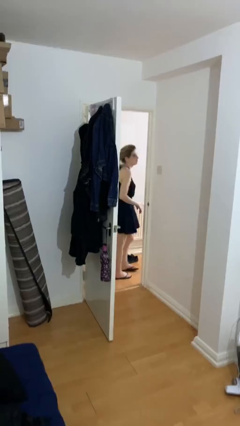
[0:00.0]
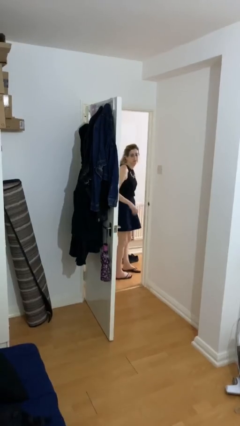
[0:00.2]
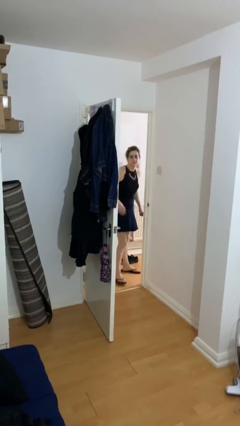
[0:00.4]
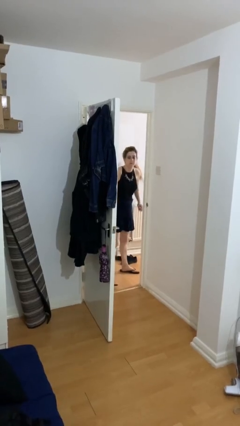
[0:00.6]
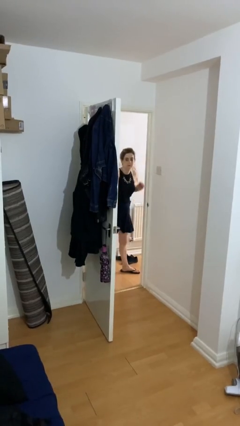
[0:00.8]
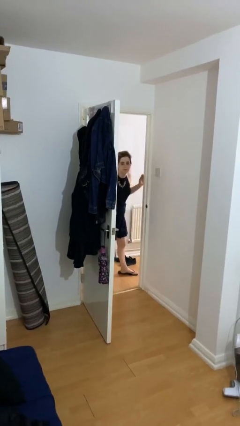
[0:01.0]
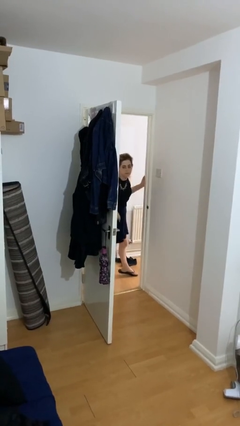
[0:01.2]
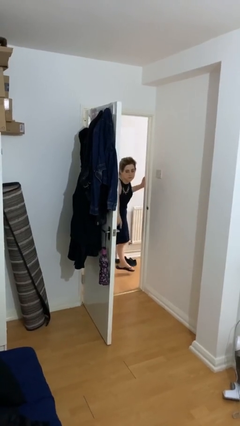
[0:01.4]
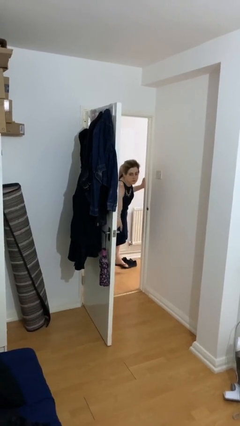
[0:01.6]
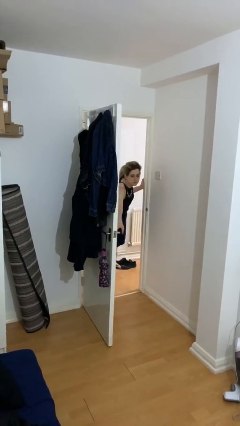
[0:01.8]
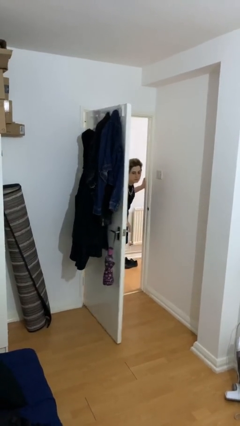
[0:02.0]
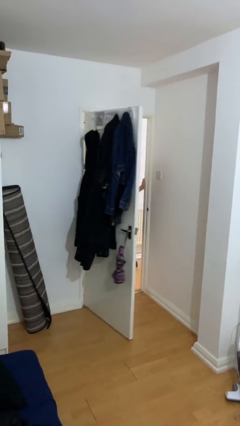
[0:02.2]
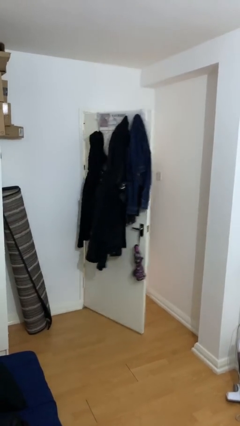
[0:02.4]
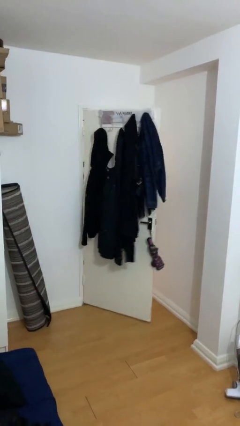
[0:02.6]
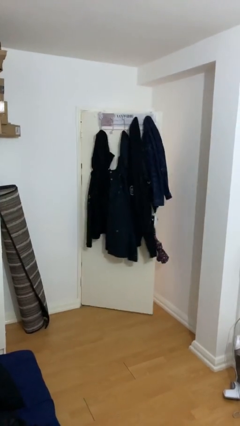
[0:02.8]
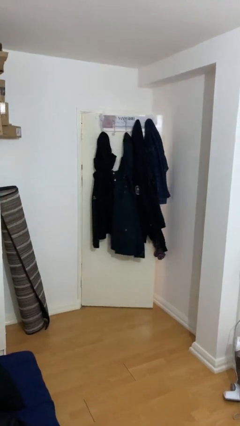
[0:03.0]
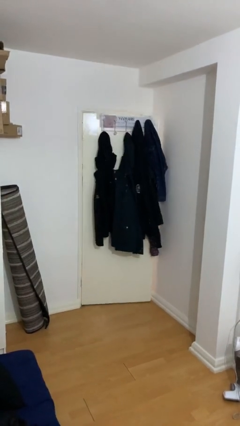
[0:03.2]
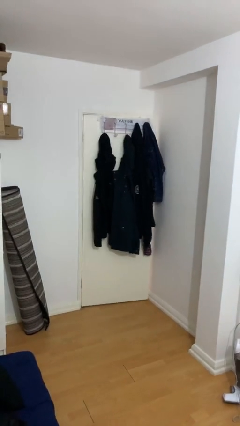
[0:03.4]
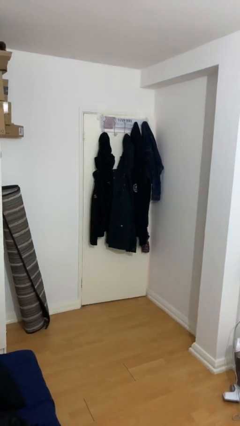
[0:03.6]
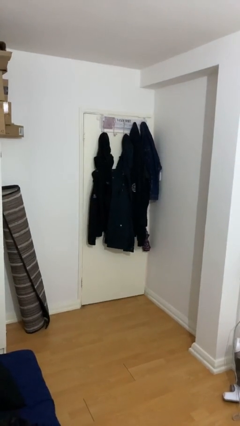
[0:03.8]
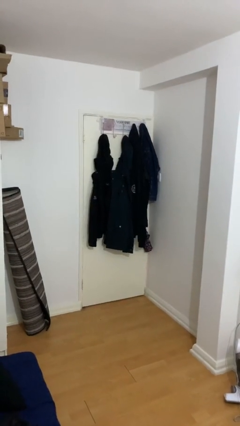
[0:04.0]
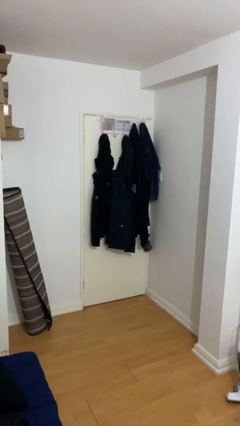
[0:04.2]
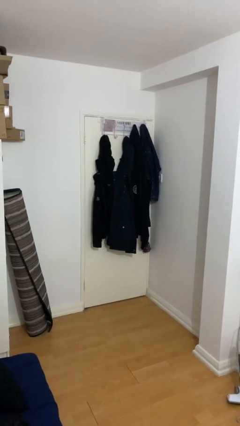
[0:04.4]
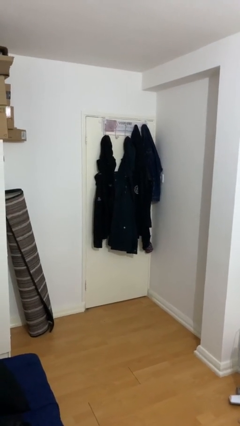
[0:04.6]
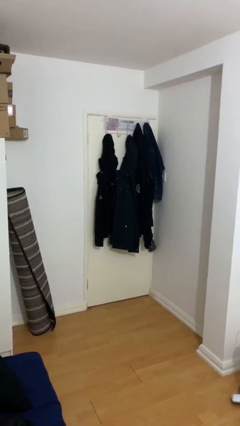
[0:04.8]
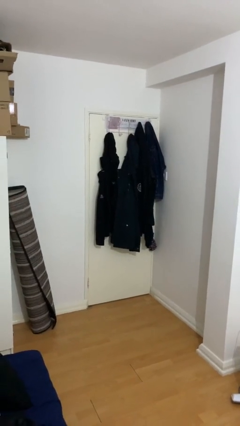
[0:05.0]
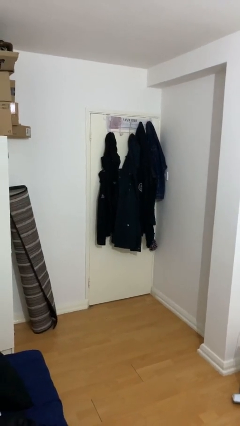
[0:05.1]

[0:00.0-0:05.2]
person closes facility door

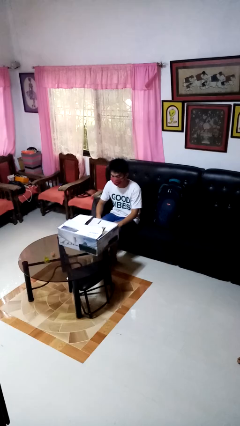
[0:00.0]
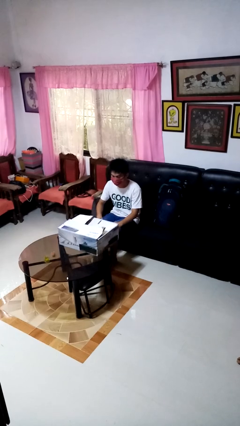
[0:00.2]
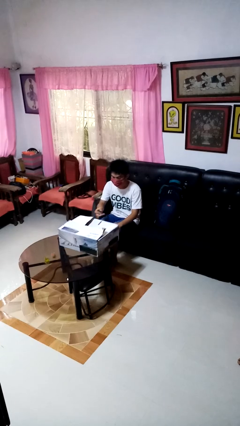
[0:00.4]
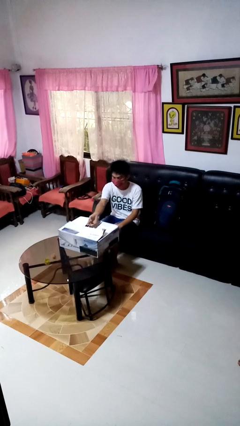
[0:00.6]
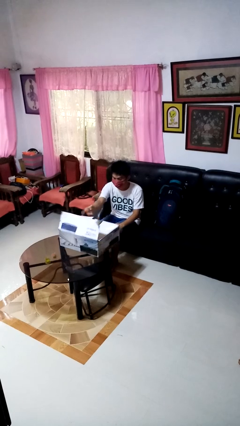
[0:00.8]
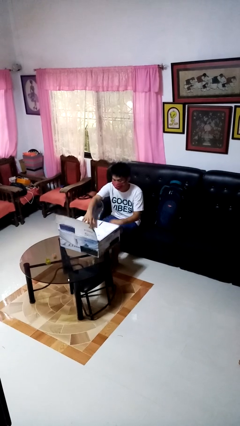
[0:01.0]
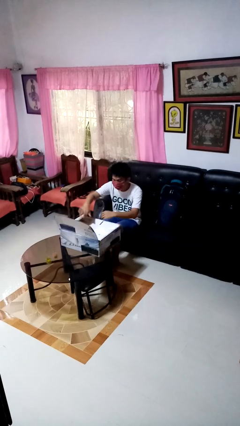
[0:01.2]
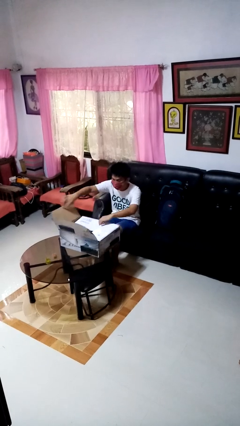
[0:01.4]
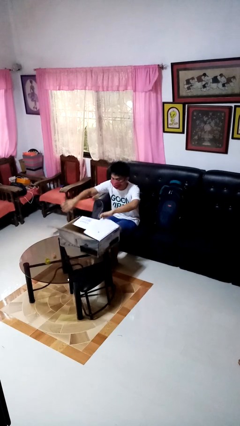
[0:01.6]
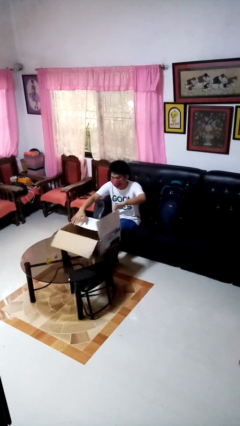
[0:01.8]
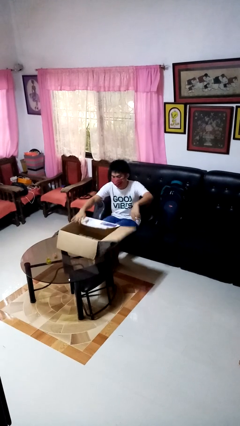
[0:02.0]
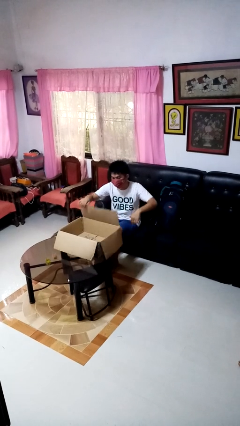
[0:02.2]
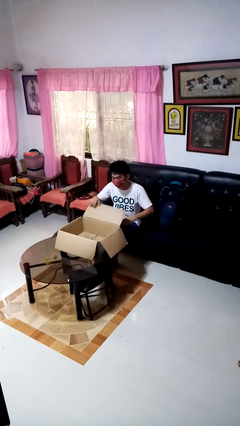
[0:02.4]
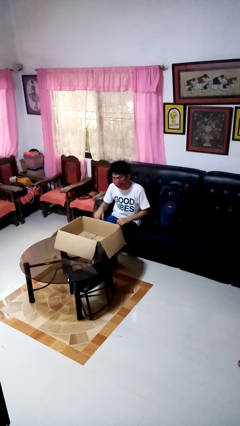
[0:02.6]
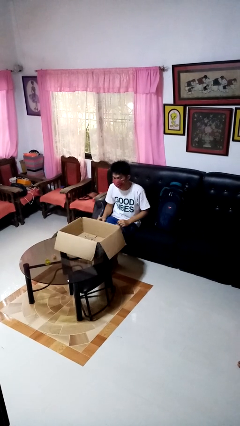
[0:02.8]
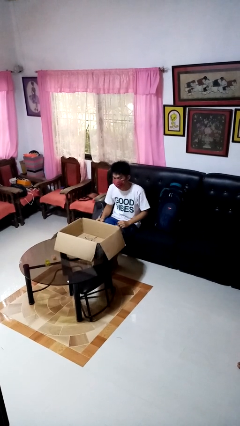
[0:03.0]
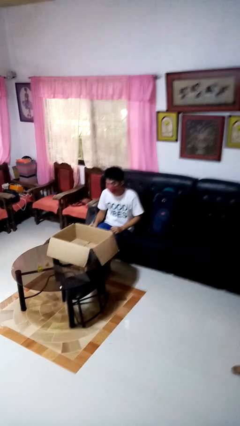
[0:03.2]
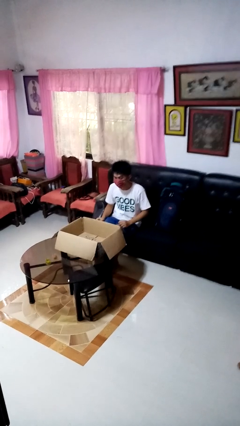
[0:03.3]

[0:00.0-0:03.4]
person opens box

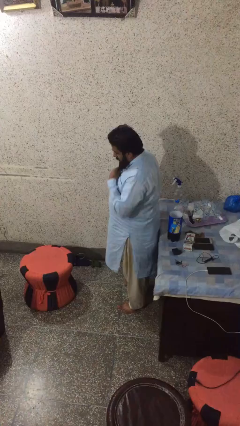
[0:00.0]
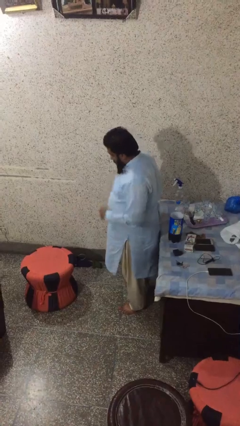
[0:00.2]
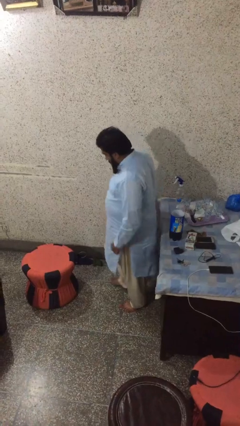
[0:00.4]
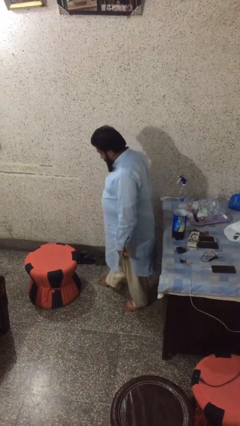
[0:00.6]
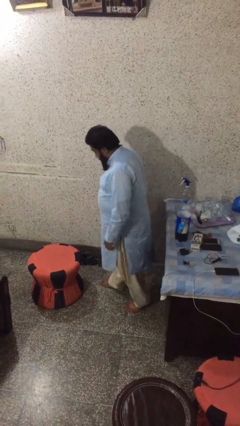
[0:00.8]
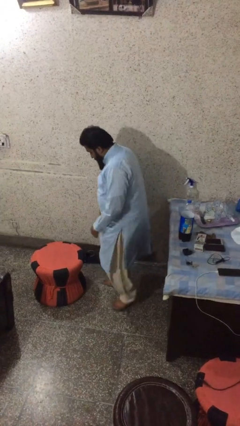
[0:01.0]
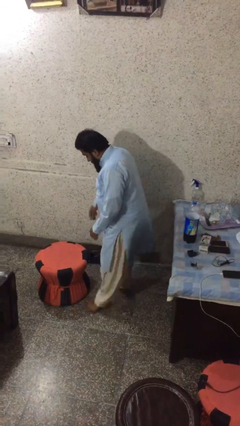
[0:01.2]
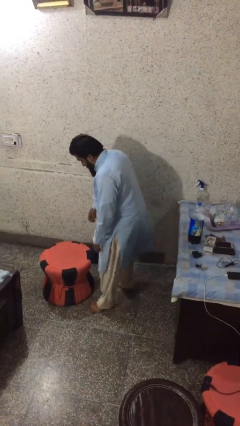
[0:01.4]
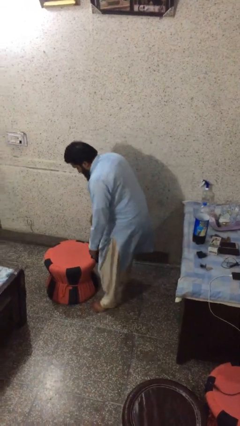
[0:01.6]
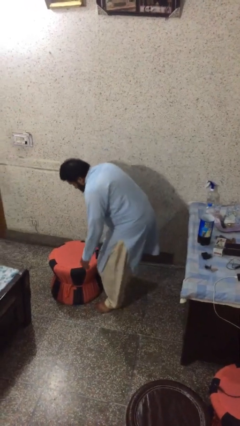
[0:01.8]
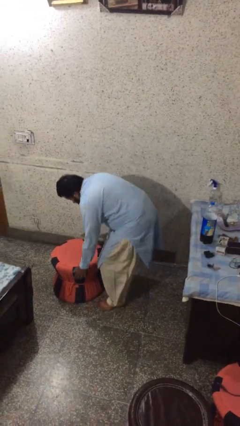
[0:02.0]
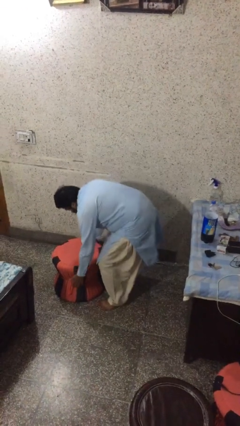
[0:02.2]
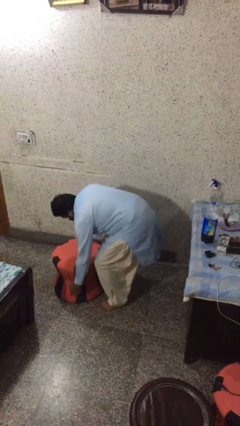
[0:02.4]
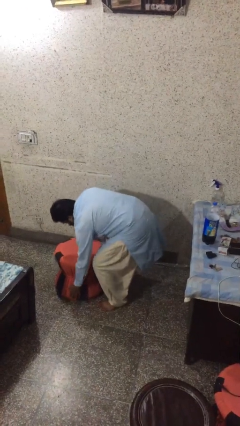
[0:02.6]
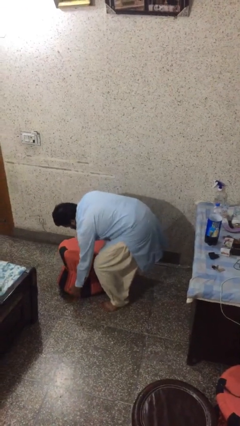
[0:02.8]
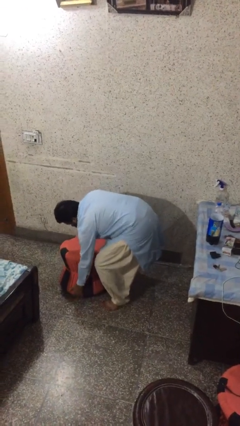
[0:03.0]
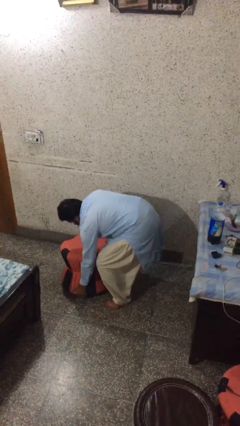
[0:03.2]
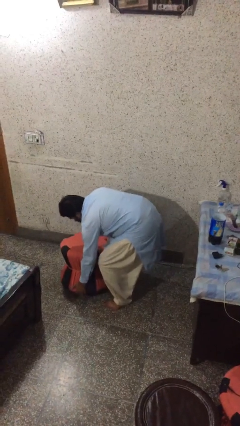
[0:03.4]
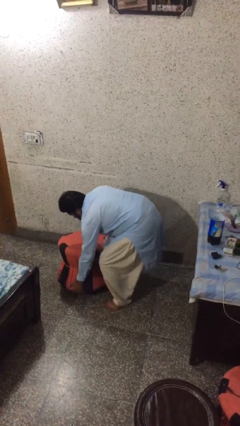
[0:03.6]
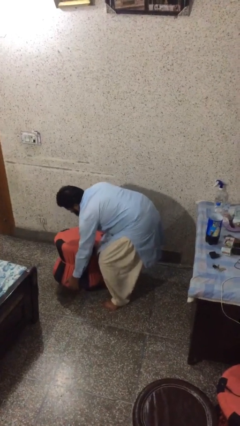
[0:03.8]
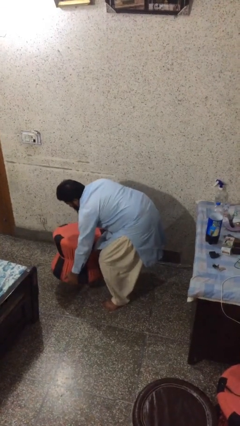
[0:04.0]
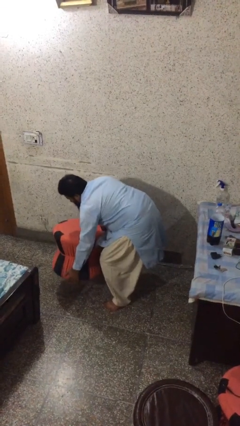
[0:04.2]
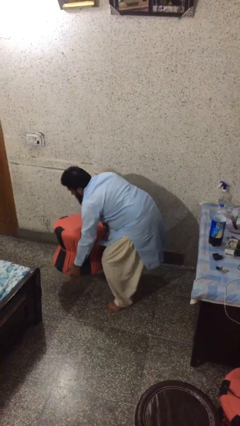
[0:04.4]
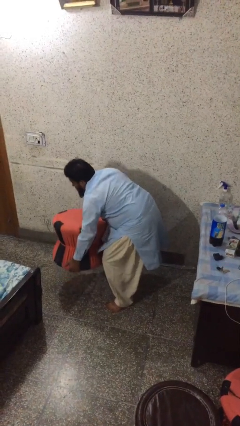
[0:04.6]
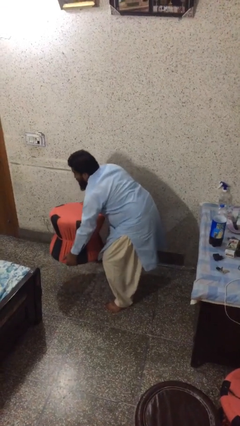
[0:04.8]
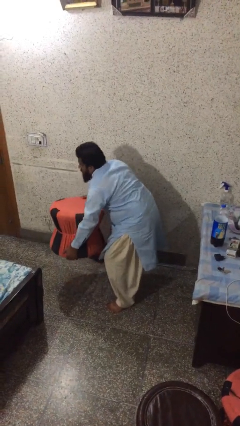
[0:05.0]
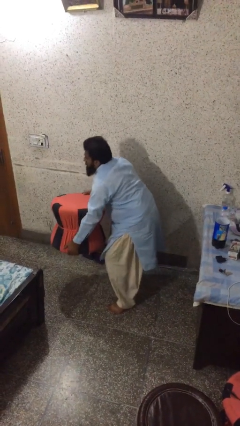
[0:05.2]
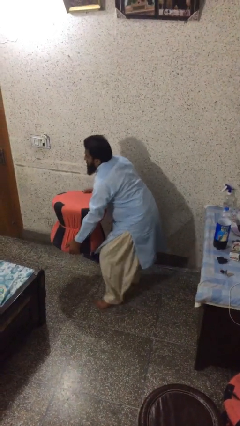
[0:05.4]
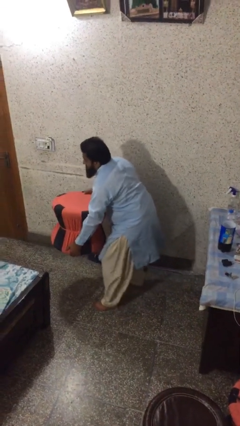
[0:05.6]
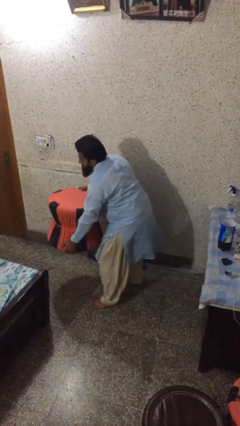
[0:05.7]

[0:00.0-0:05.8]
person picks up object from floor

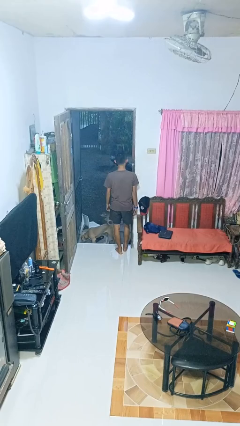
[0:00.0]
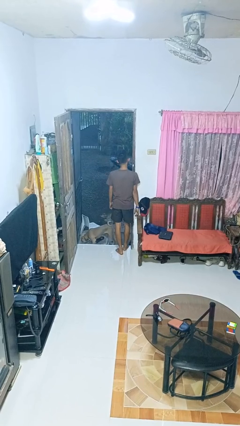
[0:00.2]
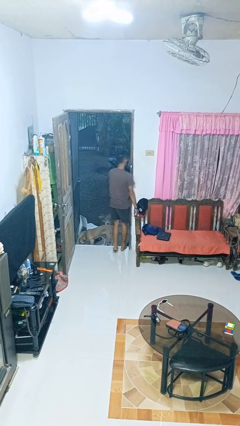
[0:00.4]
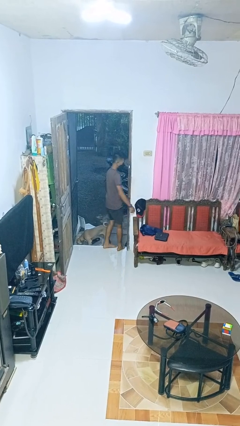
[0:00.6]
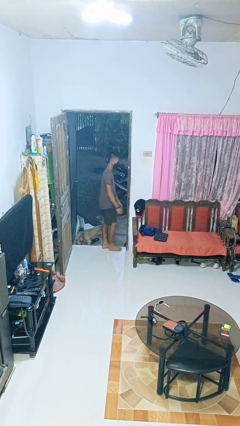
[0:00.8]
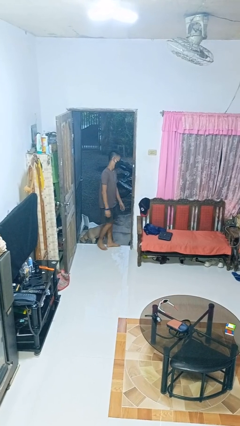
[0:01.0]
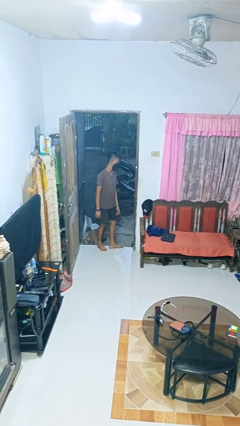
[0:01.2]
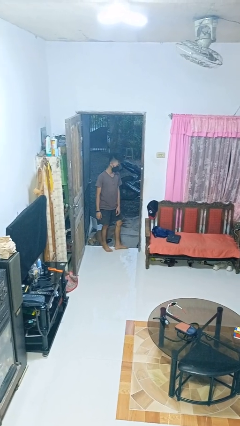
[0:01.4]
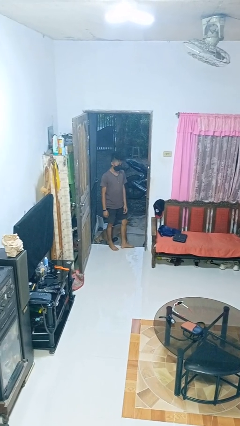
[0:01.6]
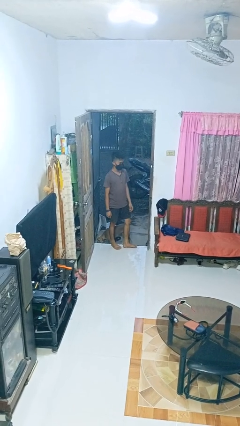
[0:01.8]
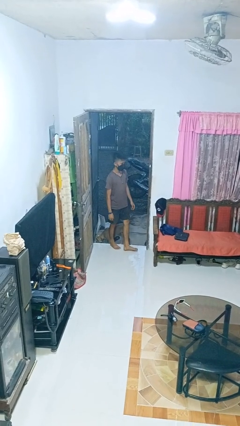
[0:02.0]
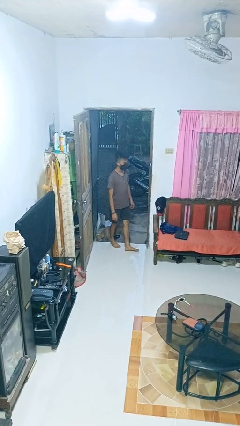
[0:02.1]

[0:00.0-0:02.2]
person bumps into wall

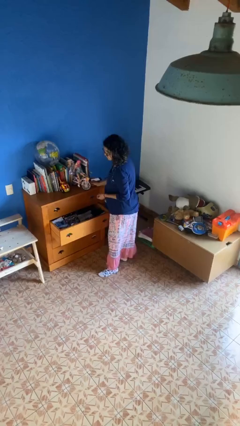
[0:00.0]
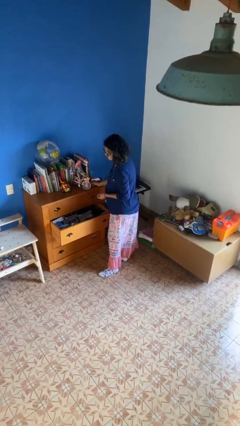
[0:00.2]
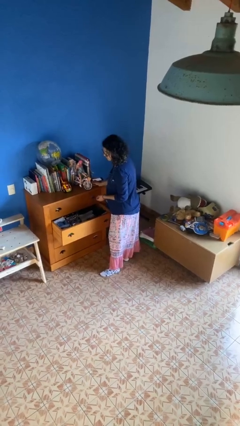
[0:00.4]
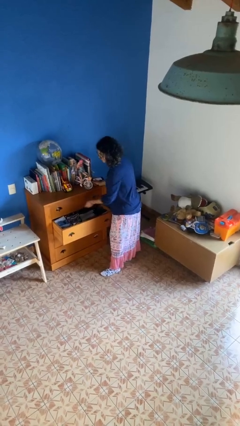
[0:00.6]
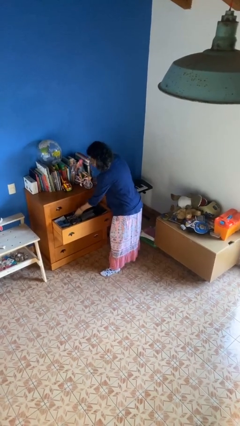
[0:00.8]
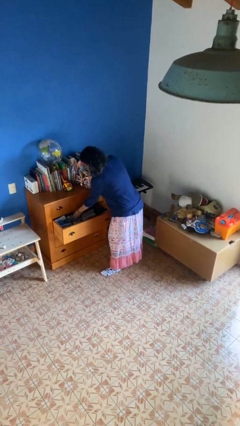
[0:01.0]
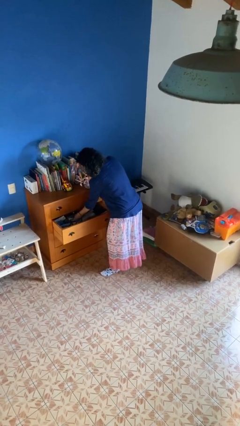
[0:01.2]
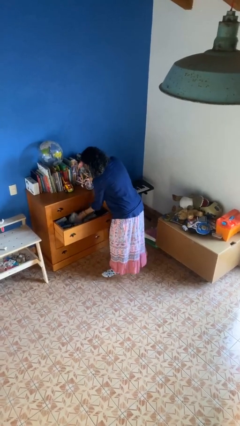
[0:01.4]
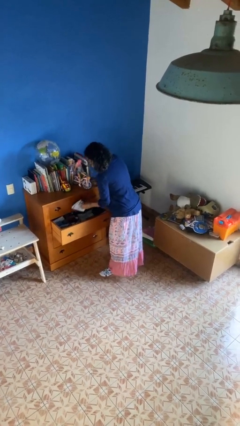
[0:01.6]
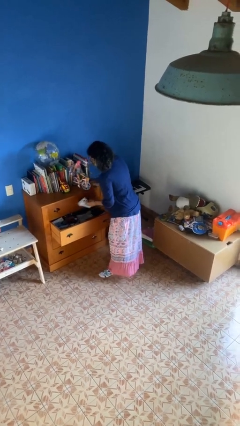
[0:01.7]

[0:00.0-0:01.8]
person takes clothes from dresser
